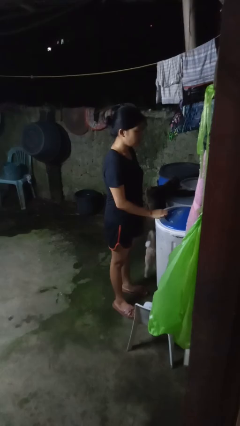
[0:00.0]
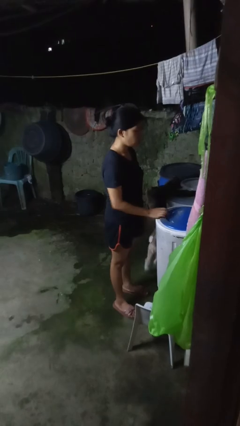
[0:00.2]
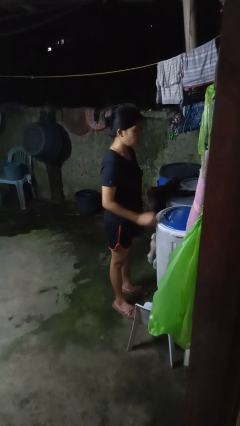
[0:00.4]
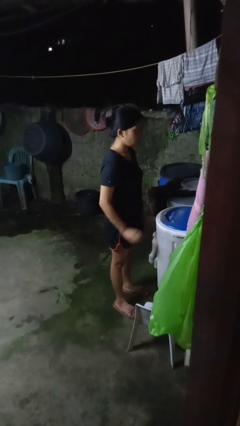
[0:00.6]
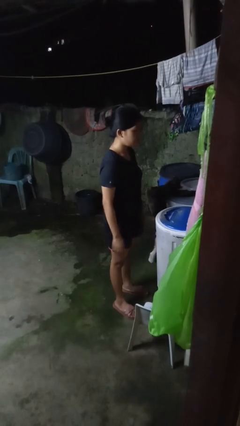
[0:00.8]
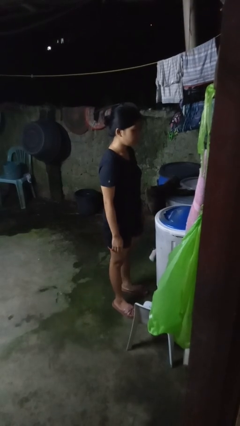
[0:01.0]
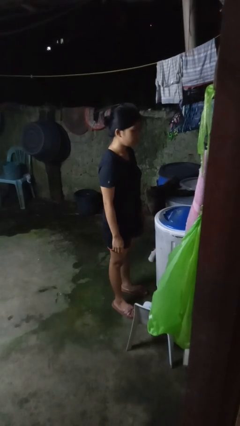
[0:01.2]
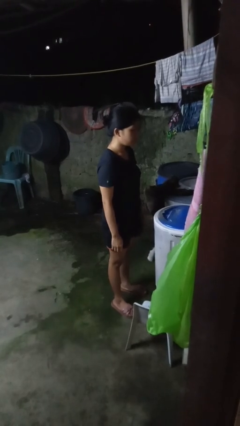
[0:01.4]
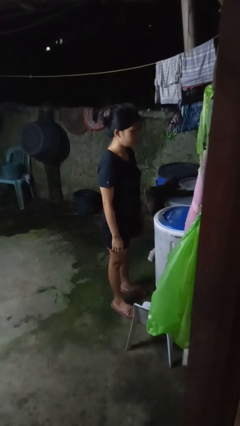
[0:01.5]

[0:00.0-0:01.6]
person closes clothes washer

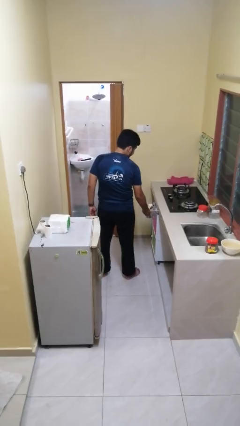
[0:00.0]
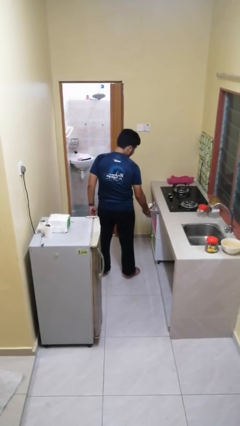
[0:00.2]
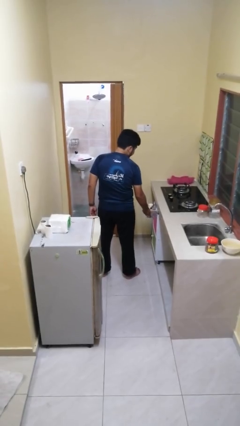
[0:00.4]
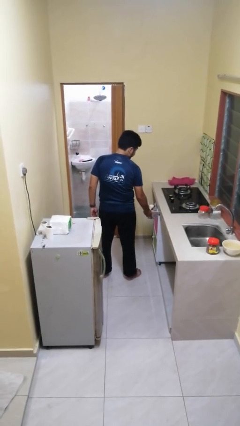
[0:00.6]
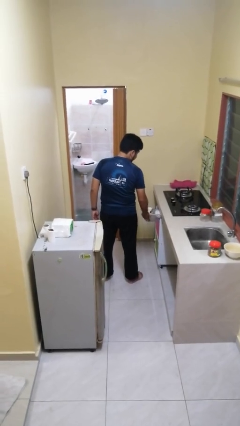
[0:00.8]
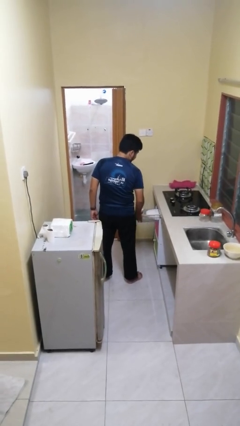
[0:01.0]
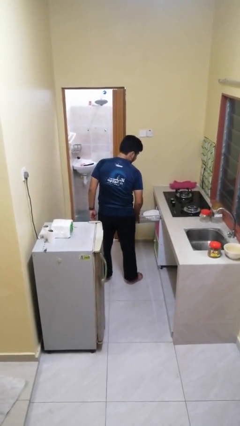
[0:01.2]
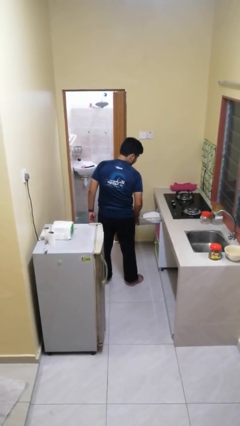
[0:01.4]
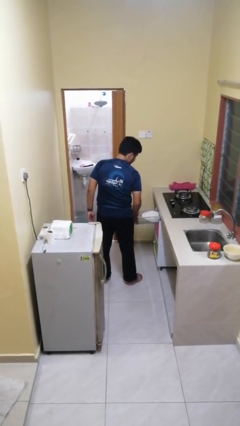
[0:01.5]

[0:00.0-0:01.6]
person opens kitchen drawer

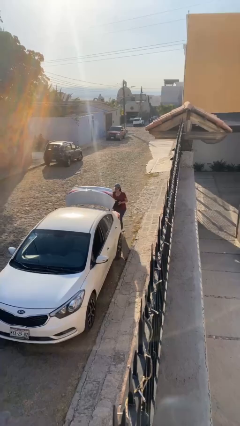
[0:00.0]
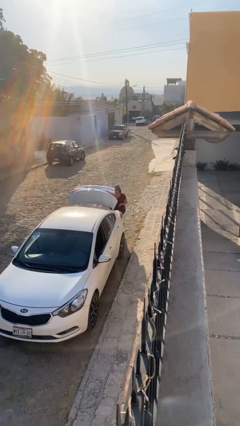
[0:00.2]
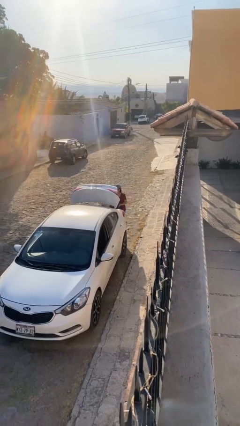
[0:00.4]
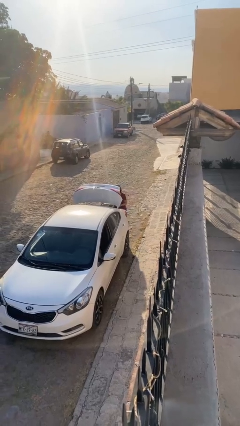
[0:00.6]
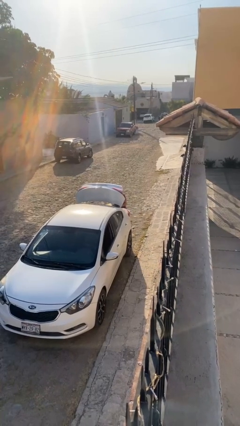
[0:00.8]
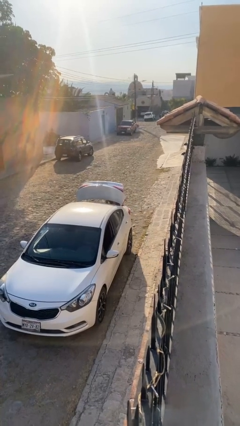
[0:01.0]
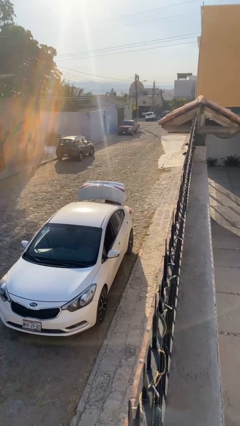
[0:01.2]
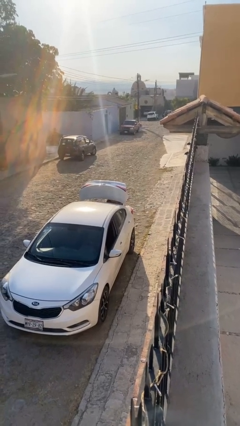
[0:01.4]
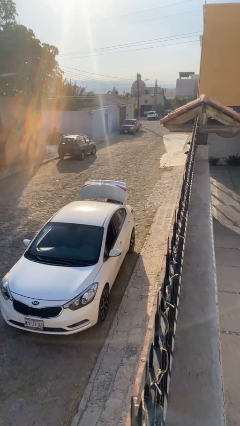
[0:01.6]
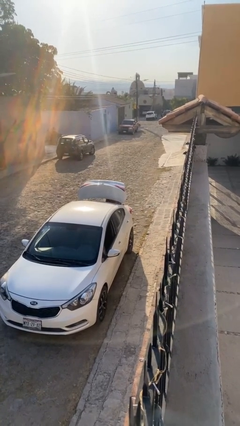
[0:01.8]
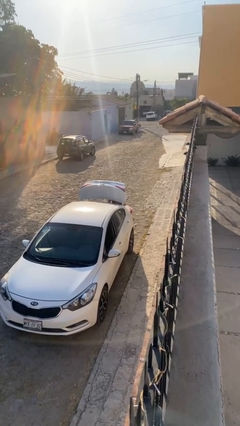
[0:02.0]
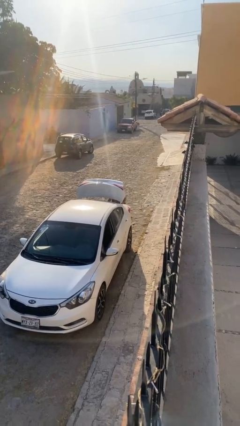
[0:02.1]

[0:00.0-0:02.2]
person loads car

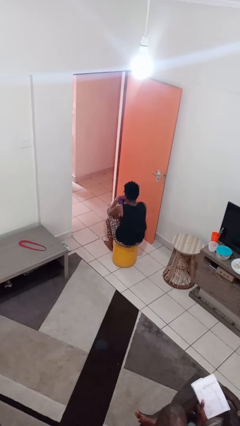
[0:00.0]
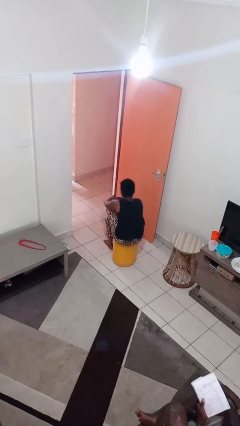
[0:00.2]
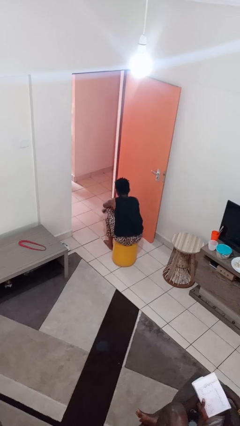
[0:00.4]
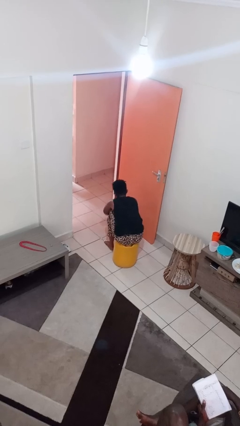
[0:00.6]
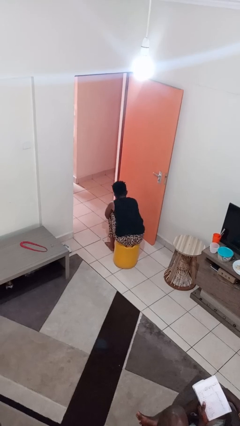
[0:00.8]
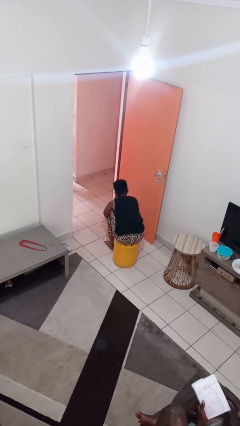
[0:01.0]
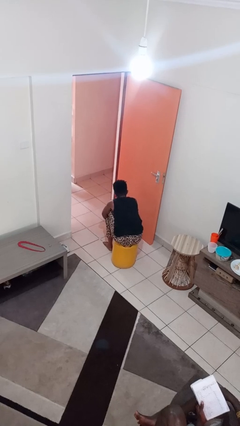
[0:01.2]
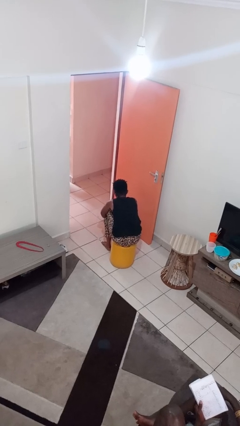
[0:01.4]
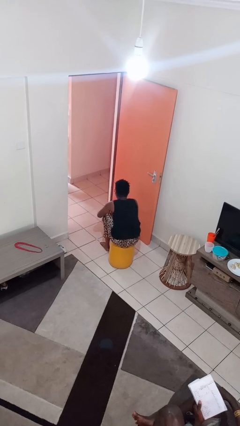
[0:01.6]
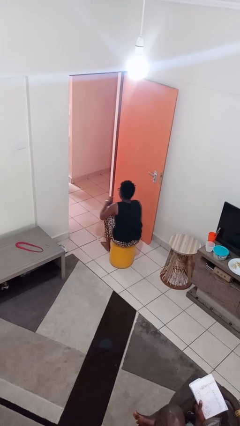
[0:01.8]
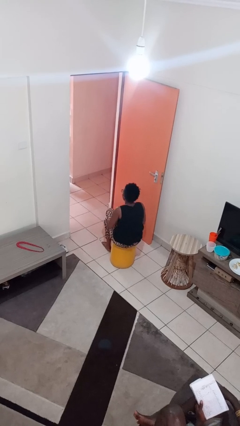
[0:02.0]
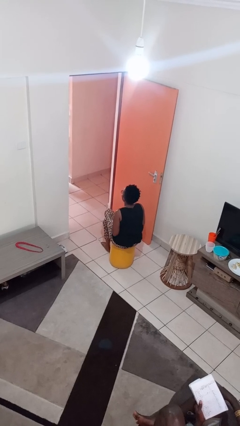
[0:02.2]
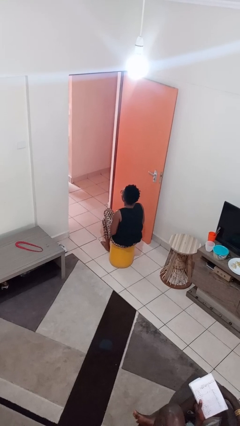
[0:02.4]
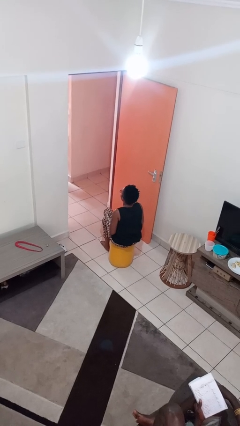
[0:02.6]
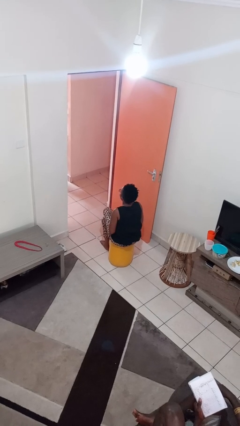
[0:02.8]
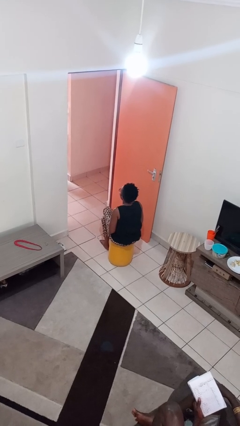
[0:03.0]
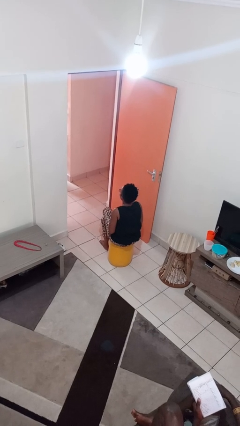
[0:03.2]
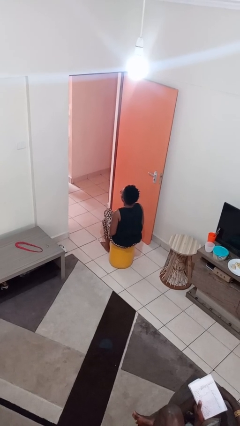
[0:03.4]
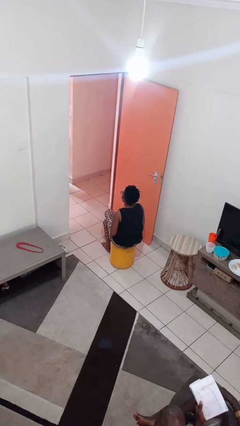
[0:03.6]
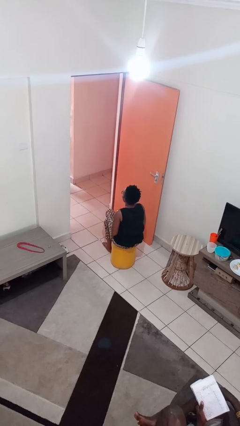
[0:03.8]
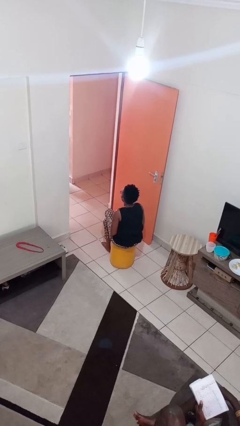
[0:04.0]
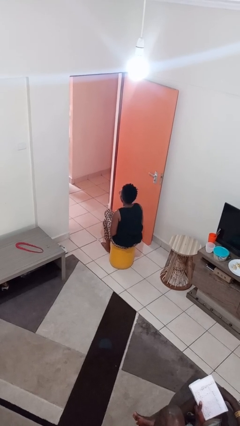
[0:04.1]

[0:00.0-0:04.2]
person puts on socks

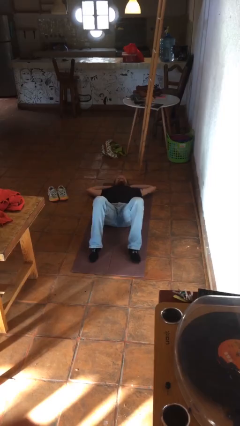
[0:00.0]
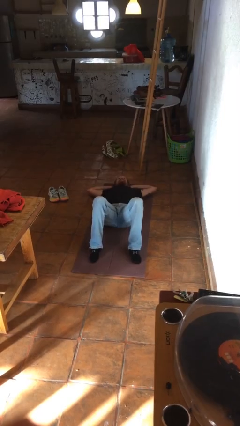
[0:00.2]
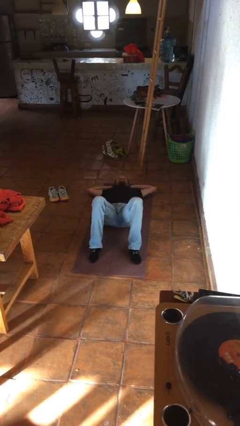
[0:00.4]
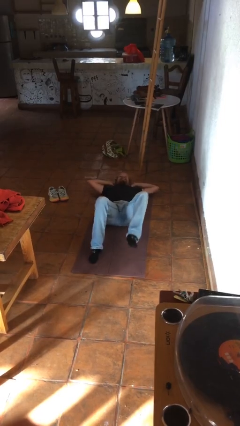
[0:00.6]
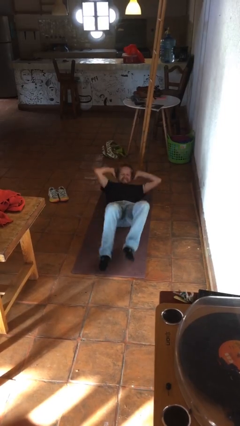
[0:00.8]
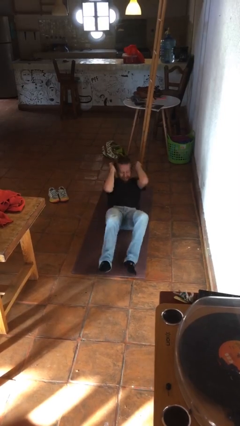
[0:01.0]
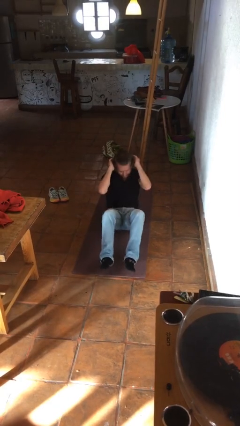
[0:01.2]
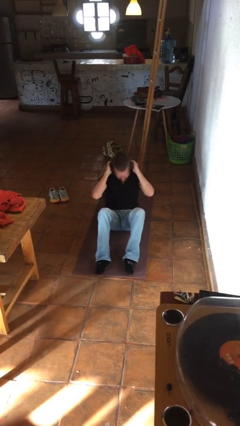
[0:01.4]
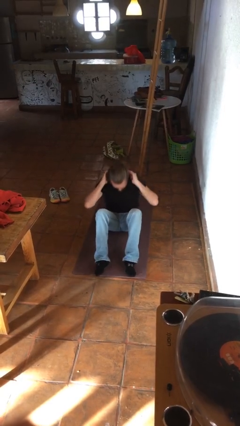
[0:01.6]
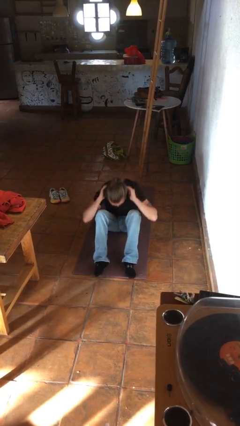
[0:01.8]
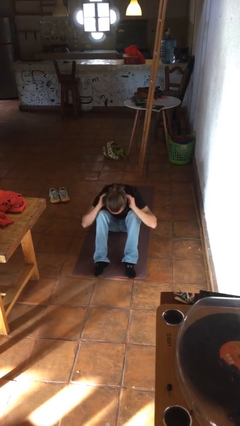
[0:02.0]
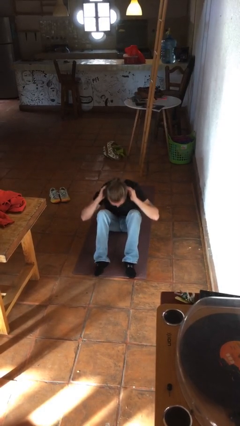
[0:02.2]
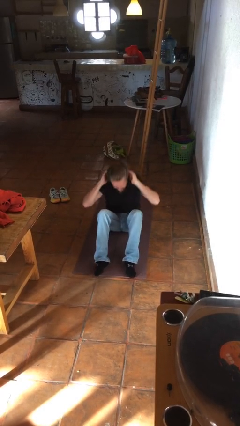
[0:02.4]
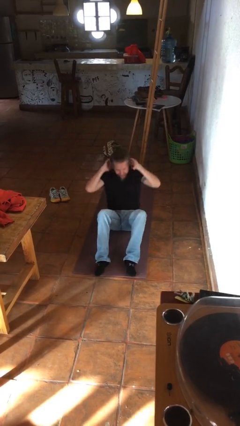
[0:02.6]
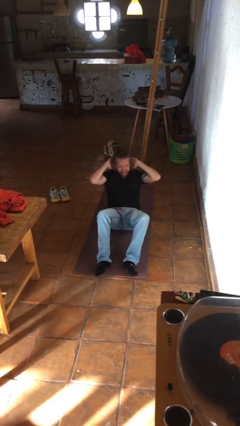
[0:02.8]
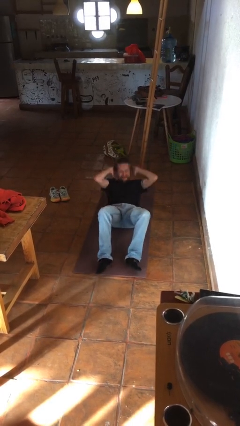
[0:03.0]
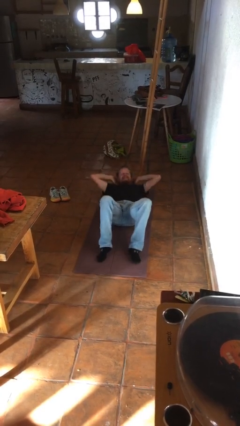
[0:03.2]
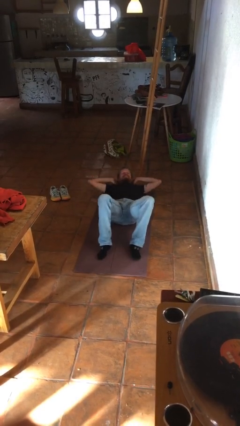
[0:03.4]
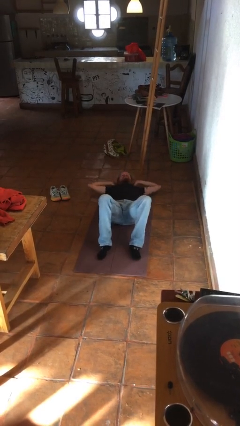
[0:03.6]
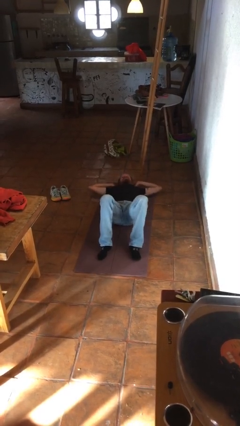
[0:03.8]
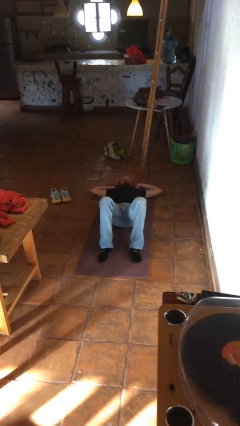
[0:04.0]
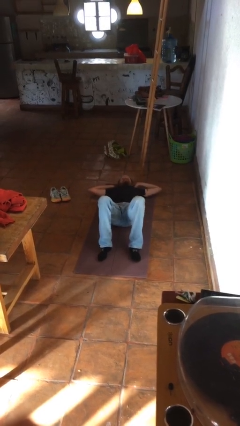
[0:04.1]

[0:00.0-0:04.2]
person exercises with situp

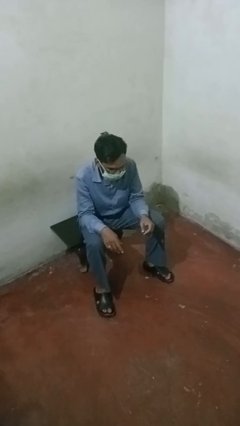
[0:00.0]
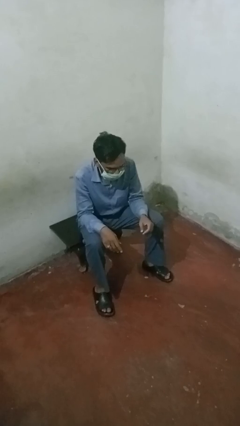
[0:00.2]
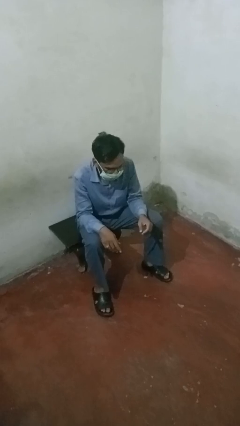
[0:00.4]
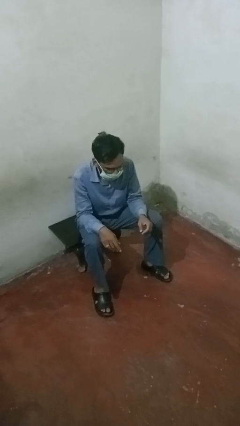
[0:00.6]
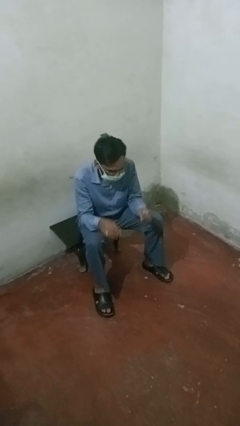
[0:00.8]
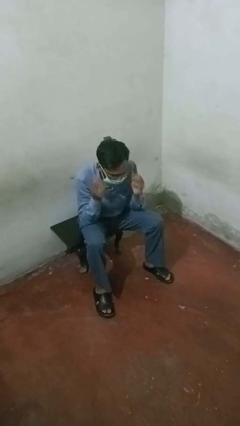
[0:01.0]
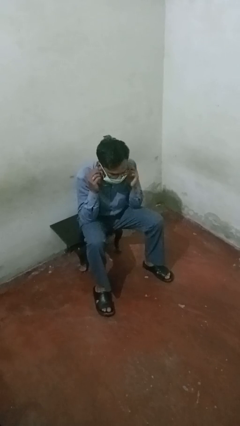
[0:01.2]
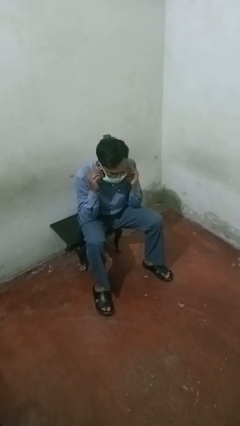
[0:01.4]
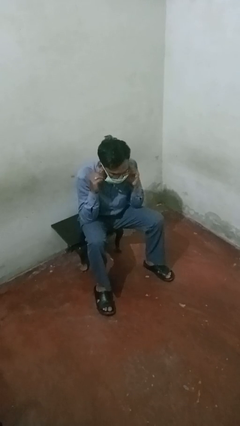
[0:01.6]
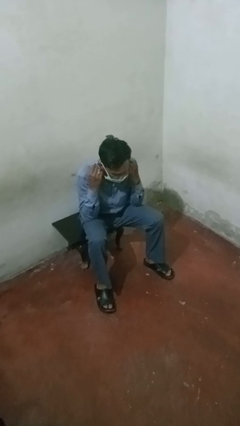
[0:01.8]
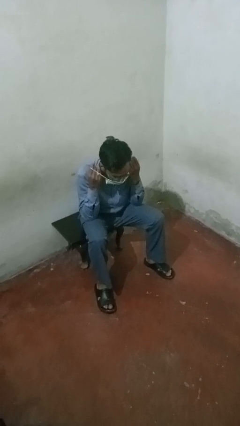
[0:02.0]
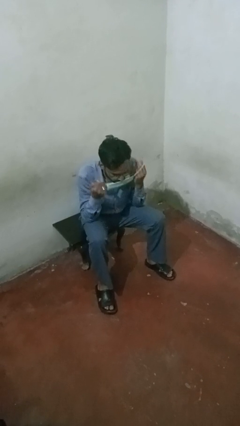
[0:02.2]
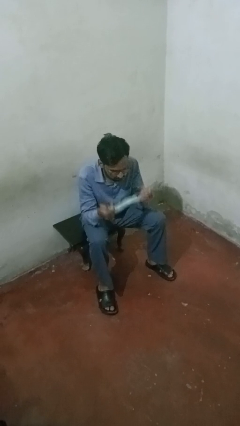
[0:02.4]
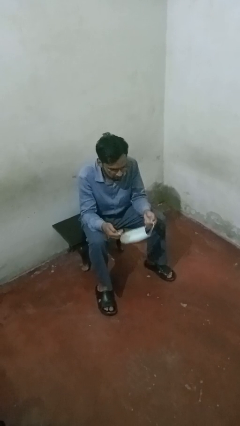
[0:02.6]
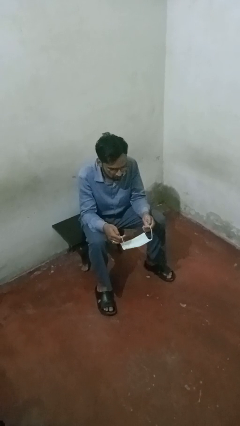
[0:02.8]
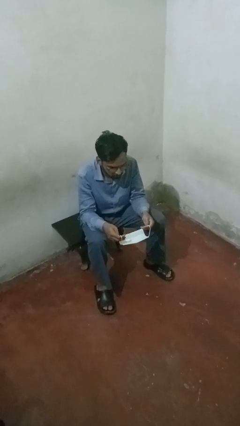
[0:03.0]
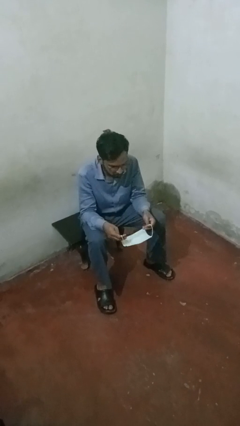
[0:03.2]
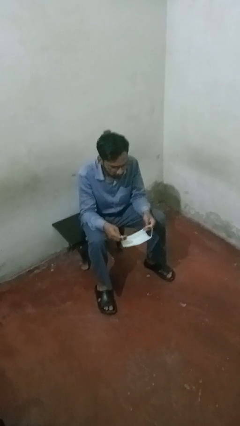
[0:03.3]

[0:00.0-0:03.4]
person takes off facemask

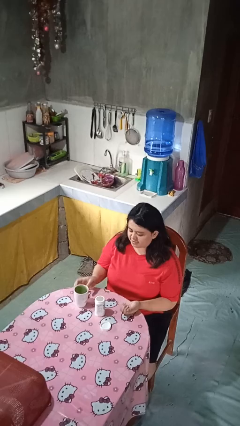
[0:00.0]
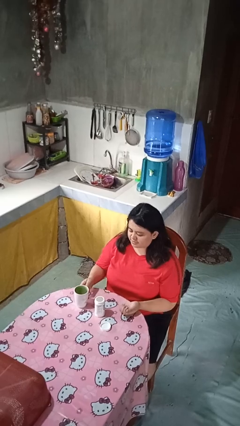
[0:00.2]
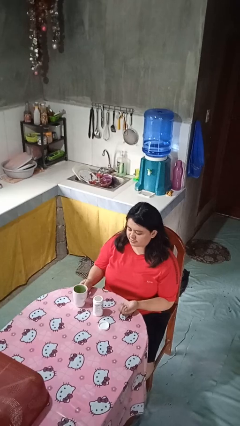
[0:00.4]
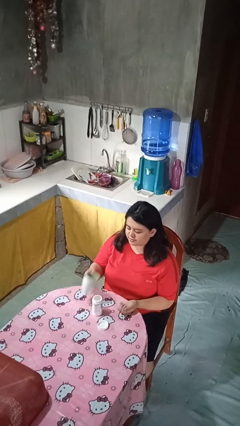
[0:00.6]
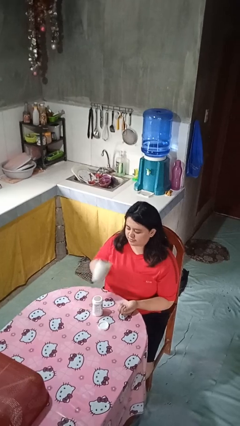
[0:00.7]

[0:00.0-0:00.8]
person drinks from cup
